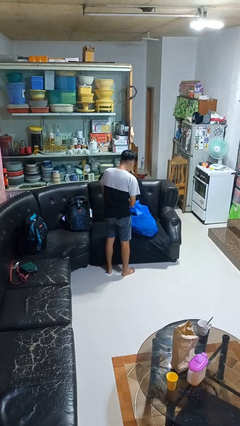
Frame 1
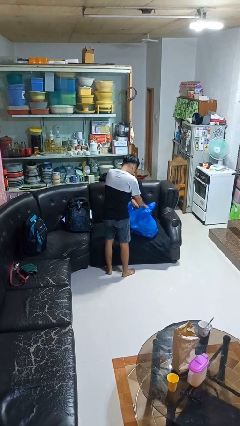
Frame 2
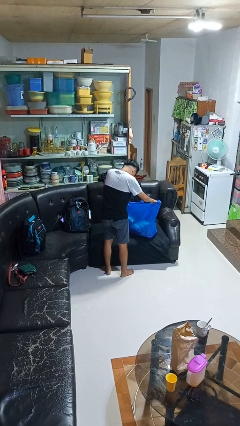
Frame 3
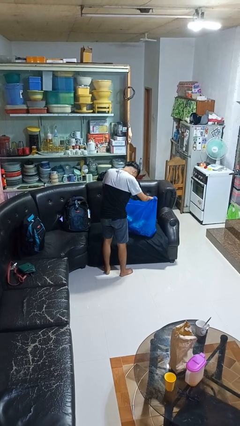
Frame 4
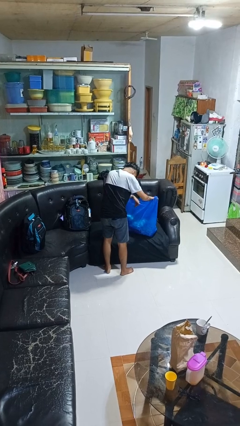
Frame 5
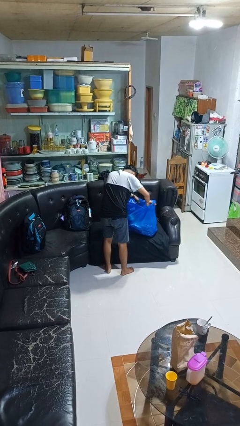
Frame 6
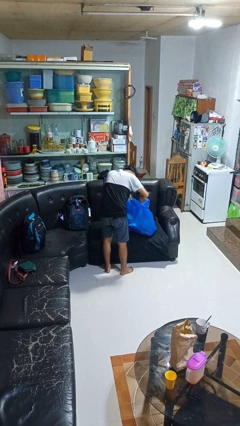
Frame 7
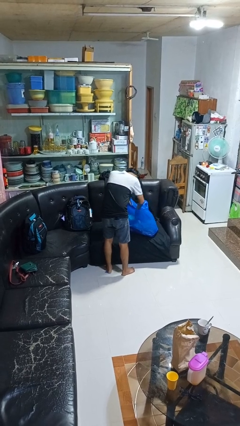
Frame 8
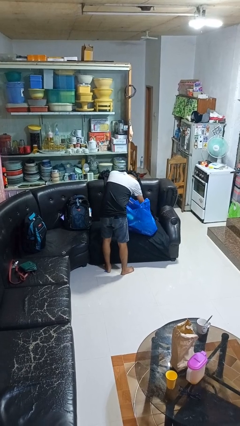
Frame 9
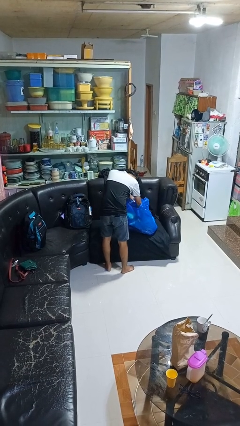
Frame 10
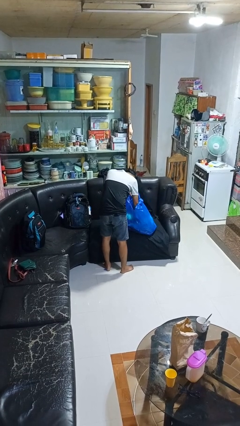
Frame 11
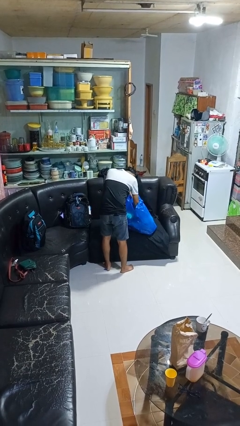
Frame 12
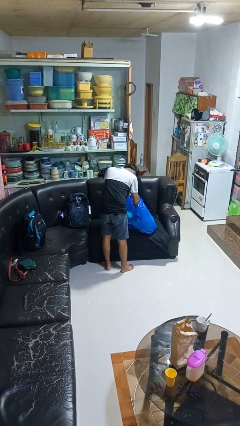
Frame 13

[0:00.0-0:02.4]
person searches in bag

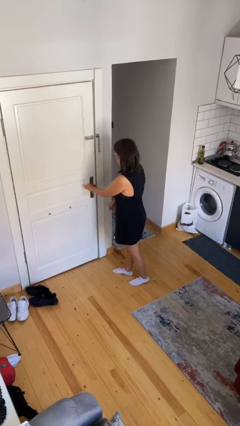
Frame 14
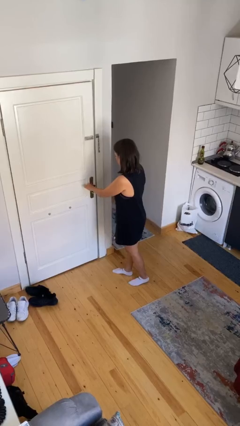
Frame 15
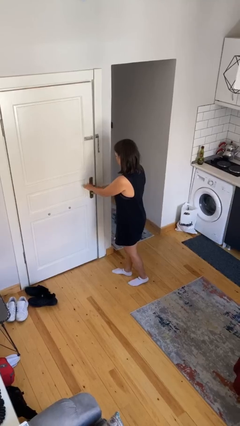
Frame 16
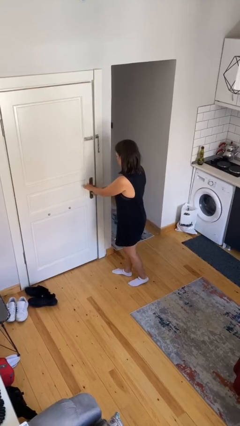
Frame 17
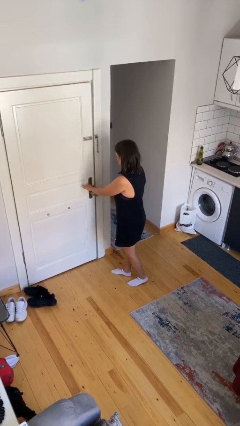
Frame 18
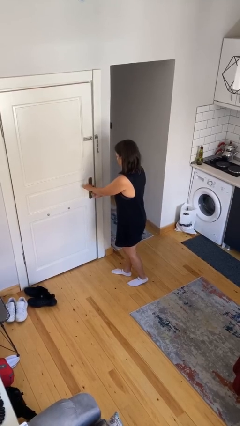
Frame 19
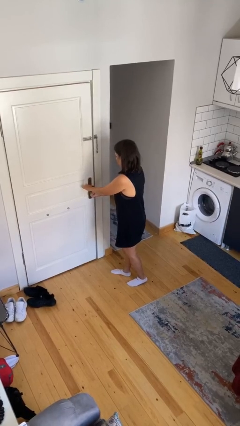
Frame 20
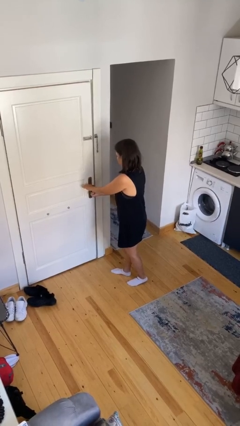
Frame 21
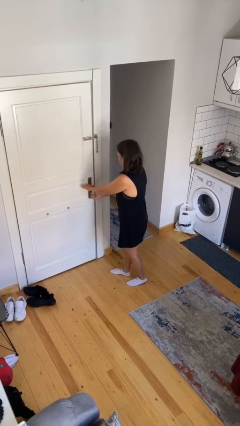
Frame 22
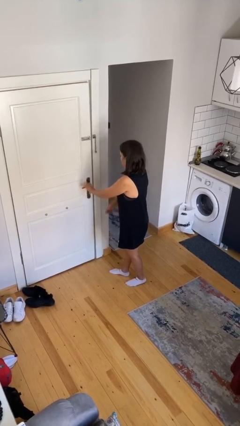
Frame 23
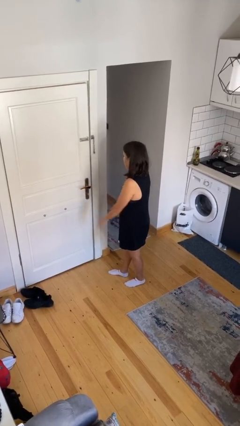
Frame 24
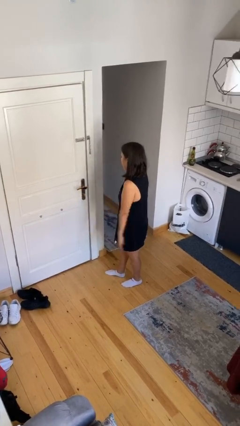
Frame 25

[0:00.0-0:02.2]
person locks door with keys

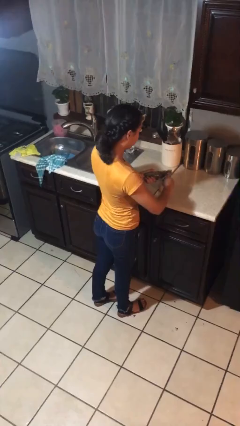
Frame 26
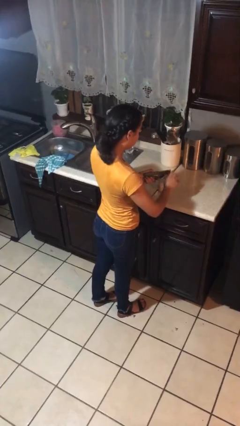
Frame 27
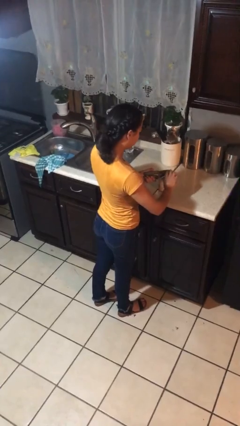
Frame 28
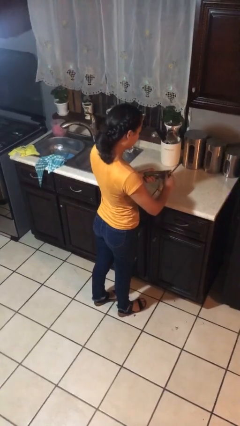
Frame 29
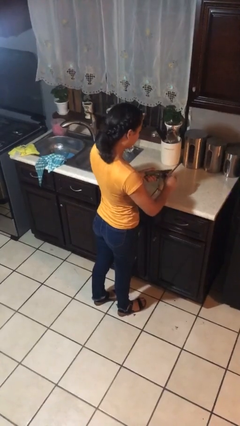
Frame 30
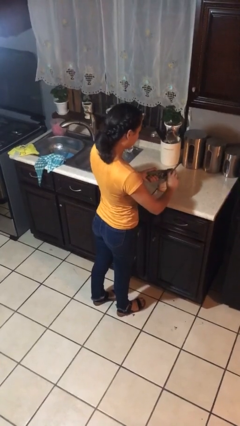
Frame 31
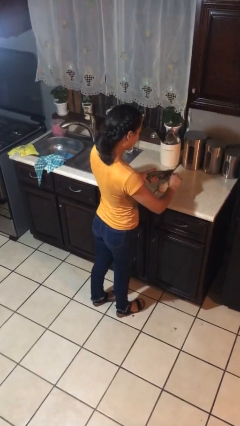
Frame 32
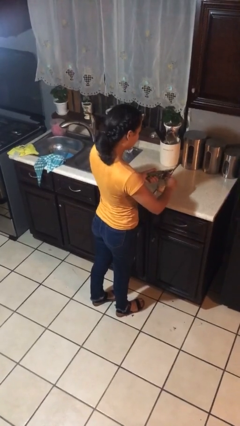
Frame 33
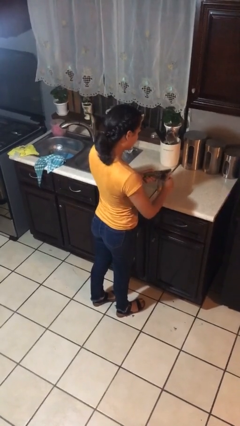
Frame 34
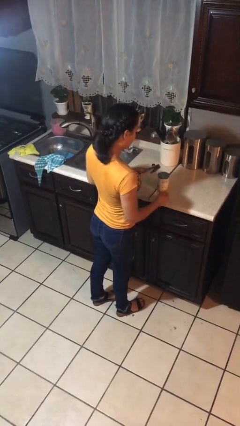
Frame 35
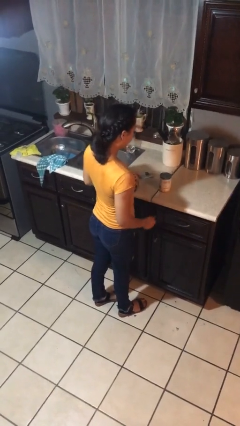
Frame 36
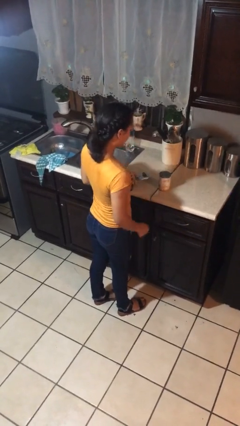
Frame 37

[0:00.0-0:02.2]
person opens can with can opener

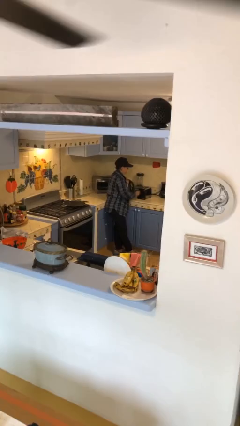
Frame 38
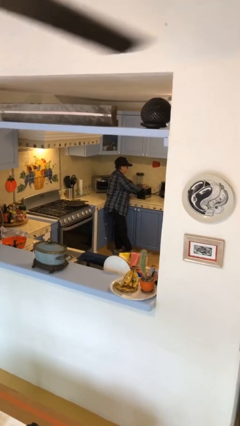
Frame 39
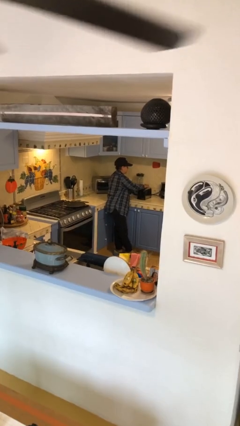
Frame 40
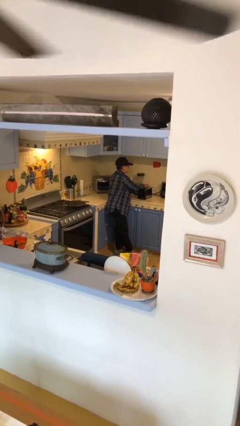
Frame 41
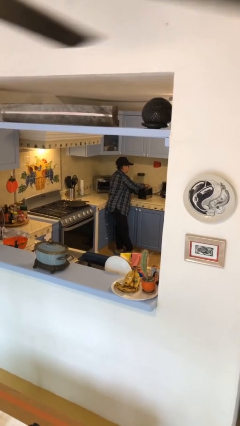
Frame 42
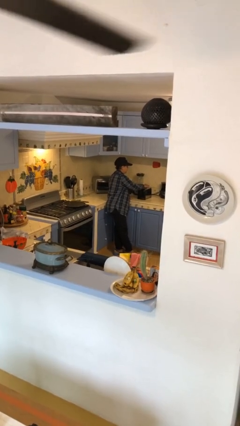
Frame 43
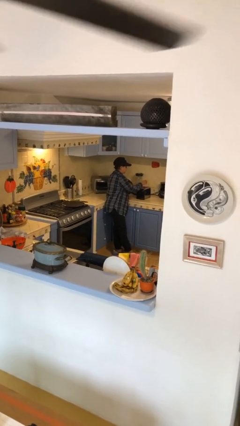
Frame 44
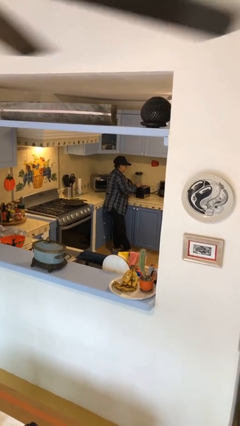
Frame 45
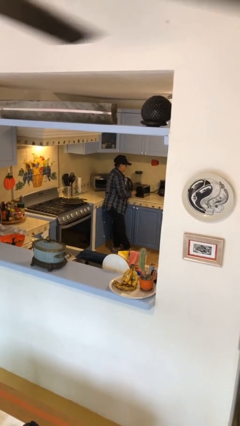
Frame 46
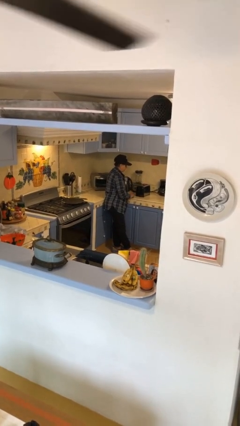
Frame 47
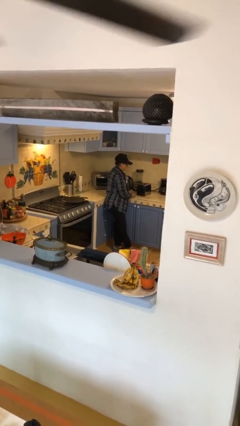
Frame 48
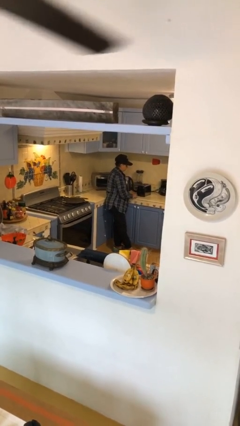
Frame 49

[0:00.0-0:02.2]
person takes object from toaster

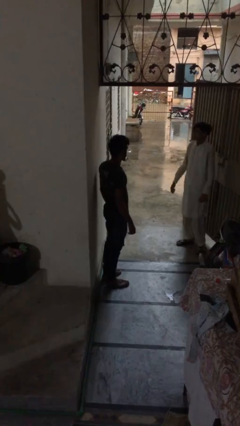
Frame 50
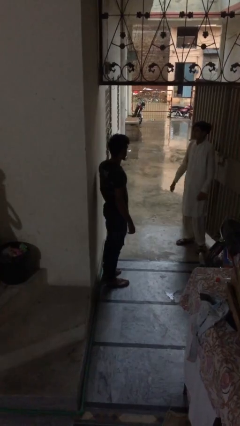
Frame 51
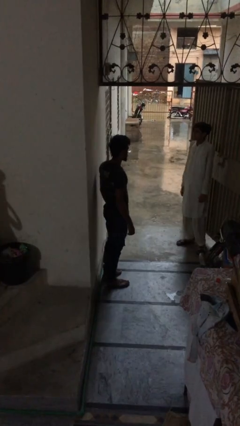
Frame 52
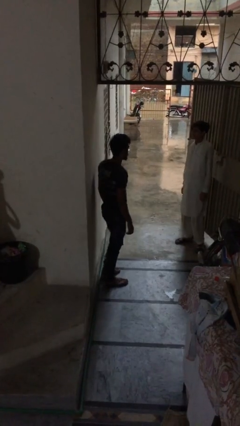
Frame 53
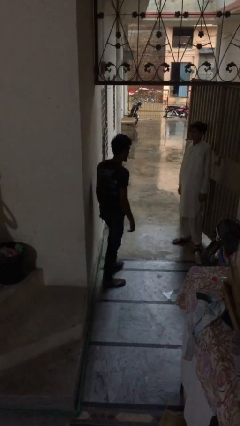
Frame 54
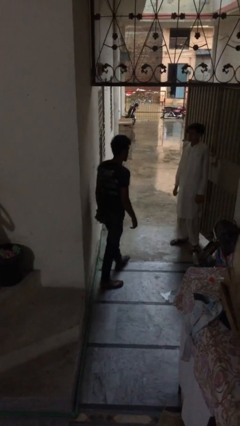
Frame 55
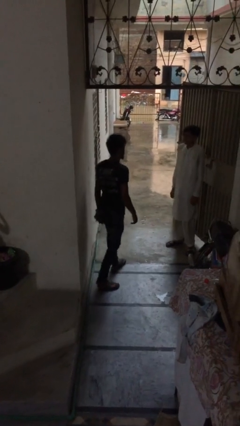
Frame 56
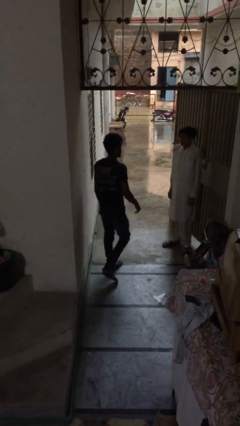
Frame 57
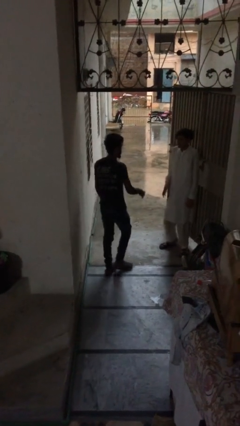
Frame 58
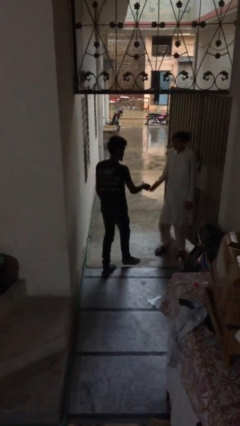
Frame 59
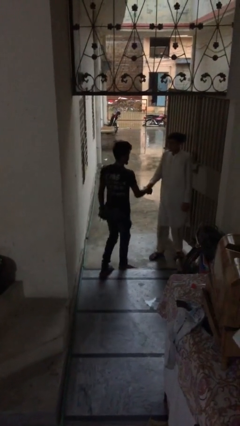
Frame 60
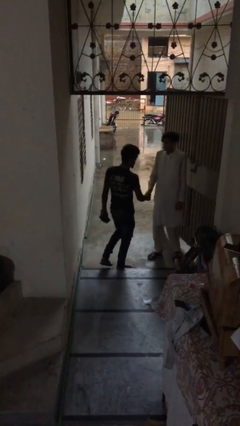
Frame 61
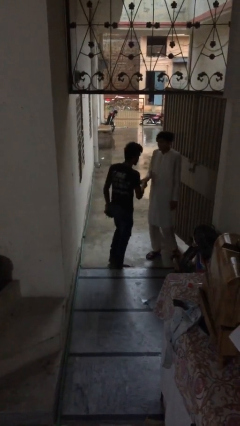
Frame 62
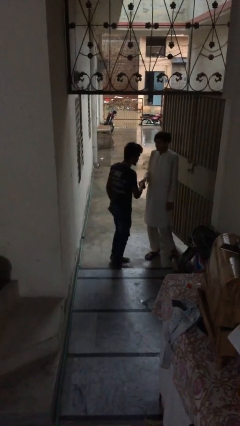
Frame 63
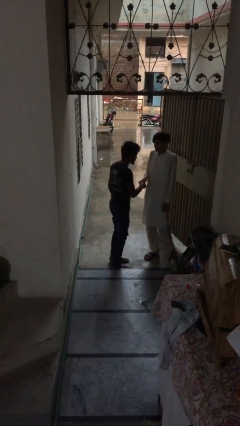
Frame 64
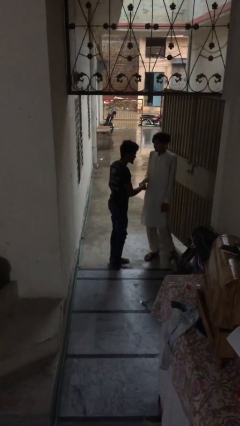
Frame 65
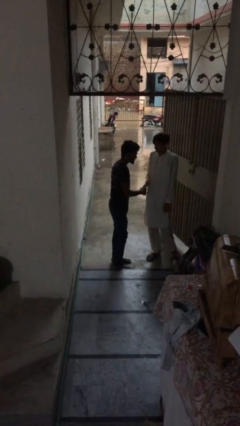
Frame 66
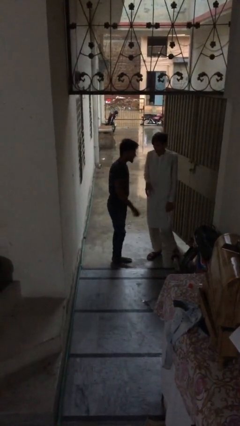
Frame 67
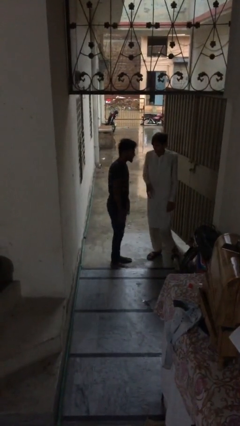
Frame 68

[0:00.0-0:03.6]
person shakes hand

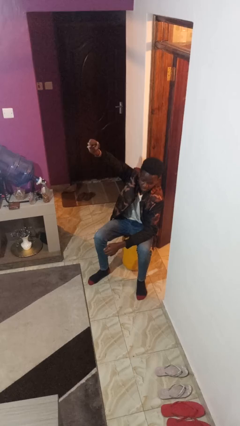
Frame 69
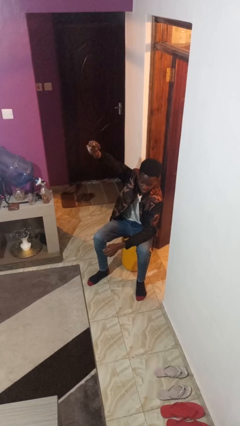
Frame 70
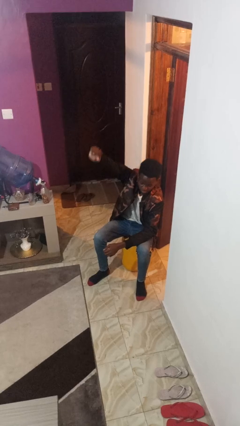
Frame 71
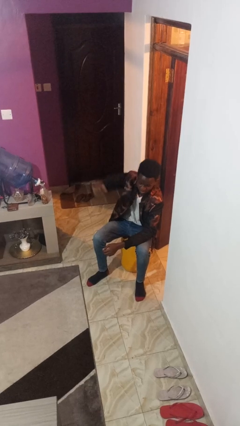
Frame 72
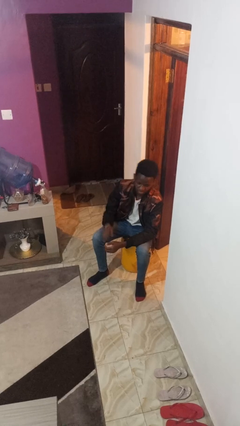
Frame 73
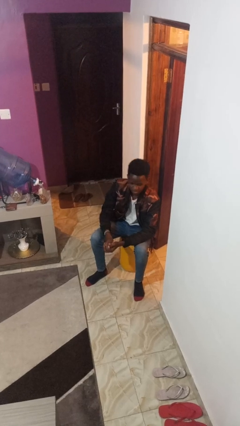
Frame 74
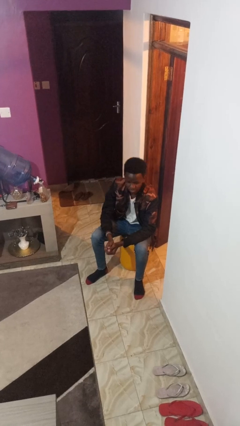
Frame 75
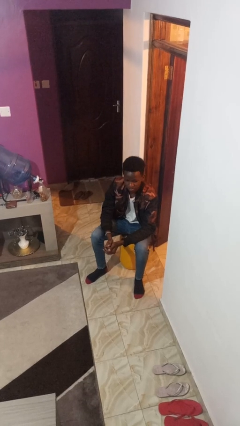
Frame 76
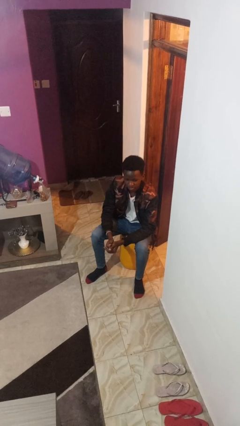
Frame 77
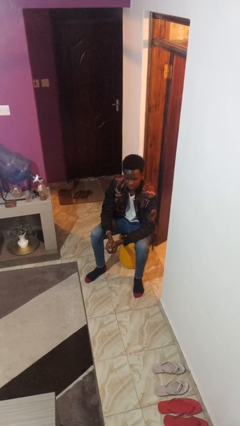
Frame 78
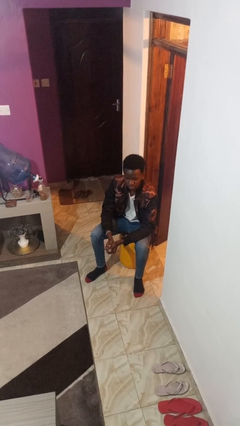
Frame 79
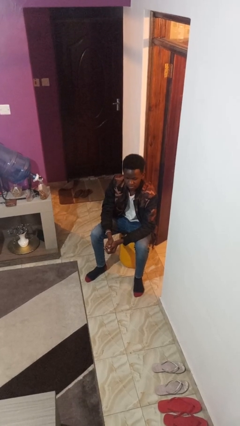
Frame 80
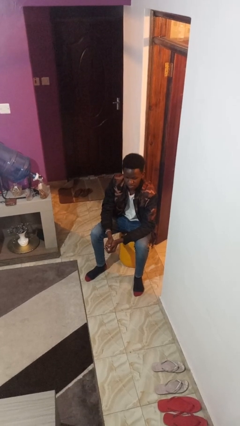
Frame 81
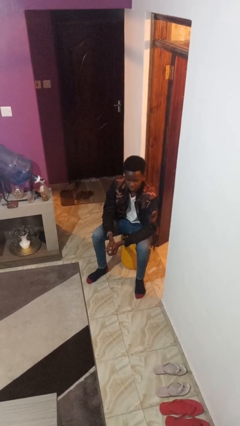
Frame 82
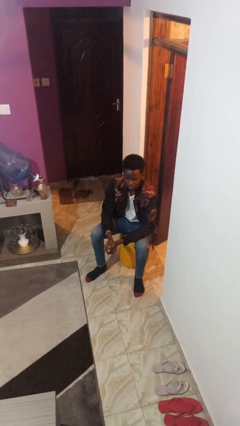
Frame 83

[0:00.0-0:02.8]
person gestures lower hand

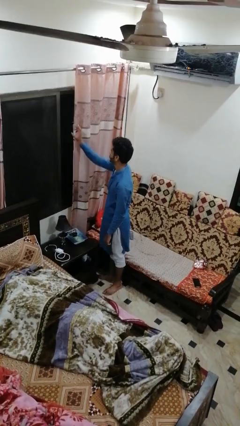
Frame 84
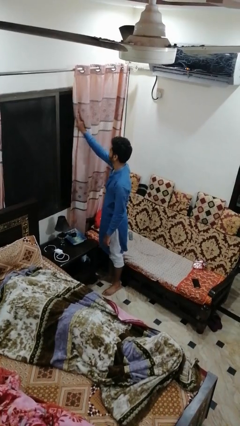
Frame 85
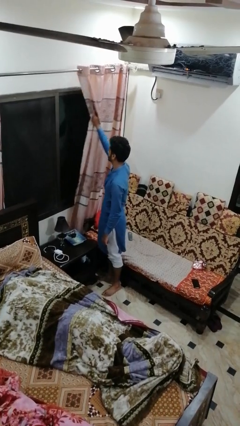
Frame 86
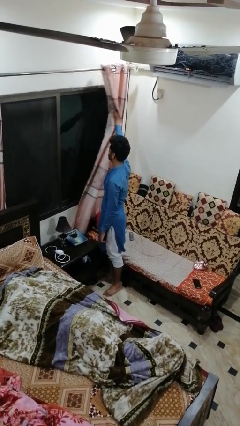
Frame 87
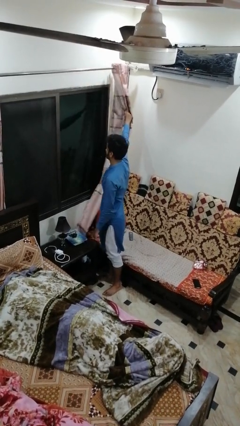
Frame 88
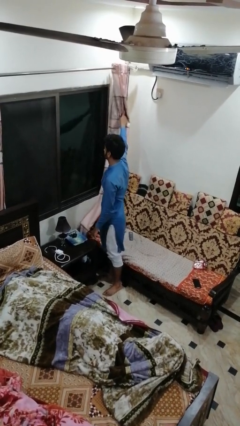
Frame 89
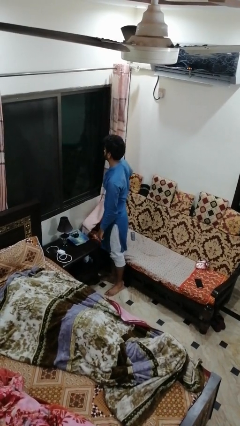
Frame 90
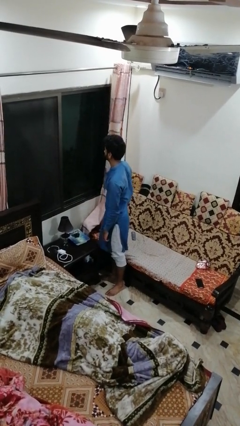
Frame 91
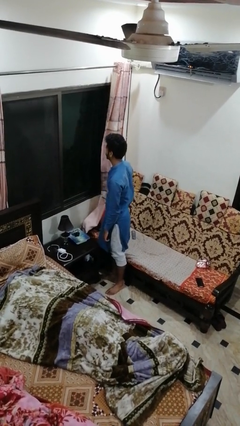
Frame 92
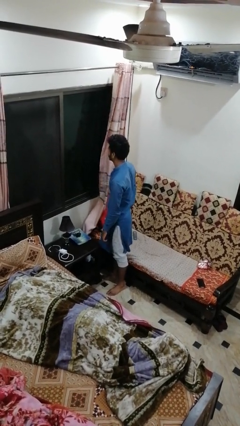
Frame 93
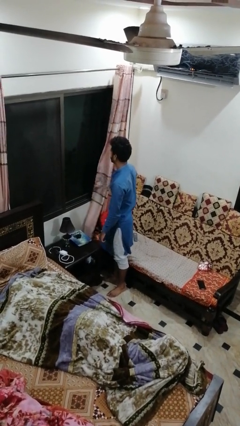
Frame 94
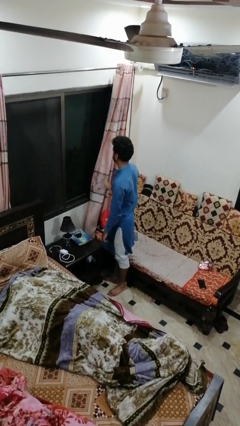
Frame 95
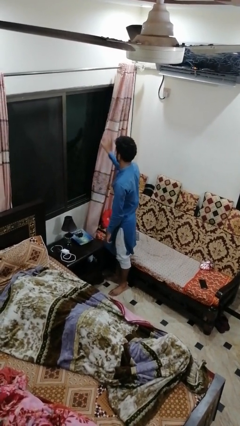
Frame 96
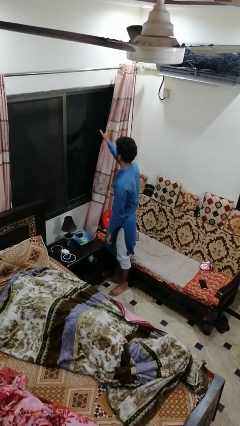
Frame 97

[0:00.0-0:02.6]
person opens curtains
